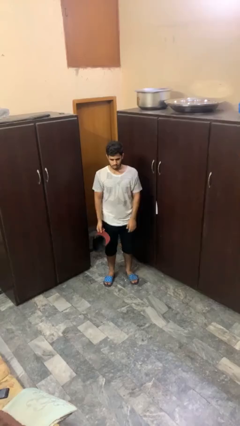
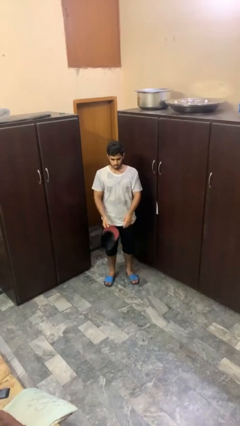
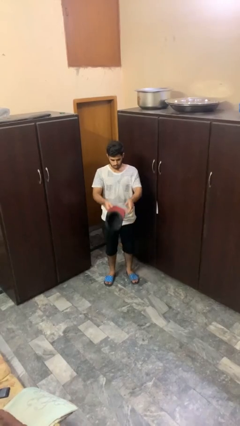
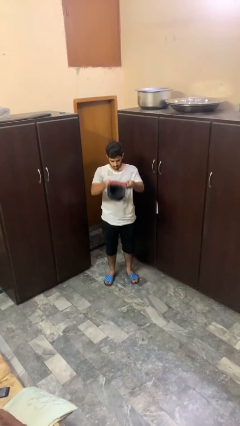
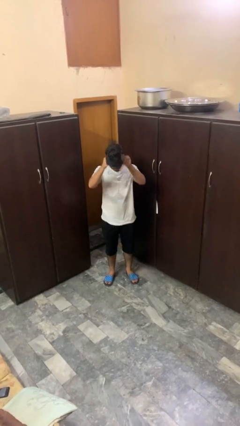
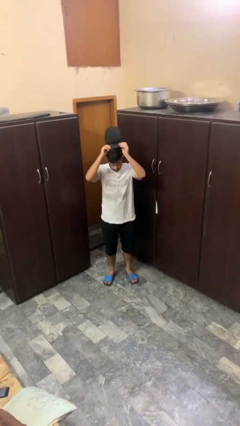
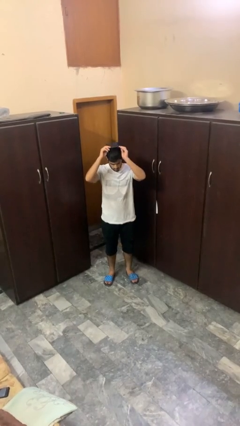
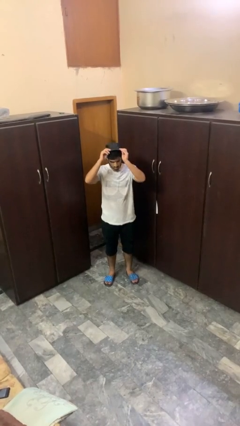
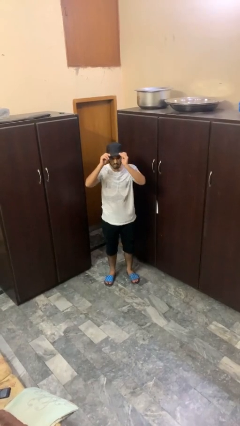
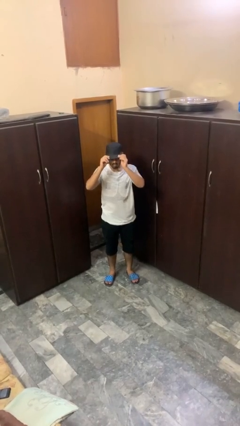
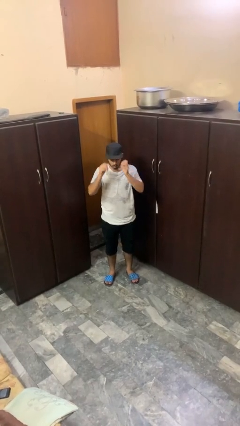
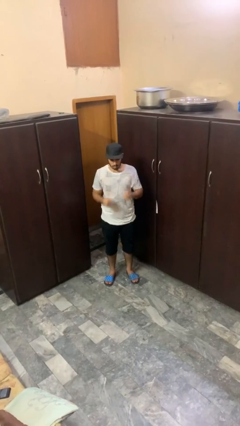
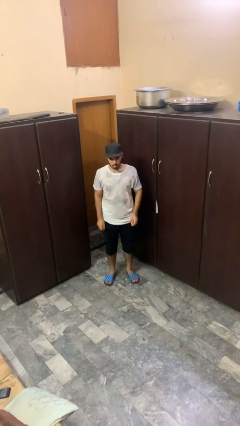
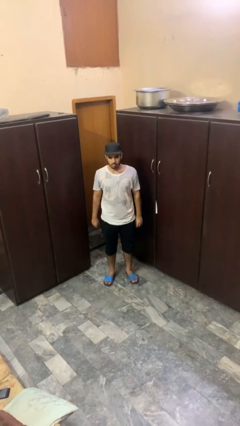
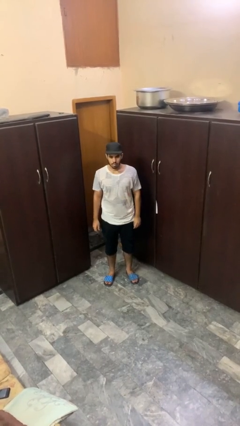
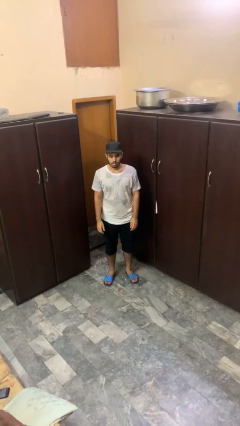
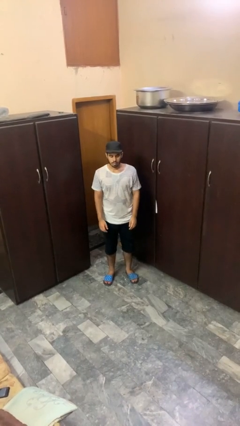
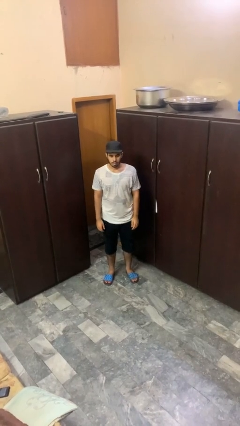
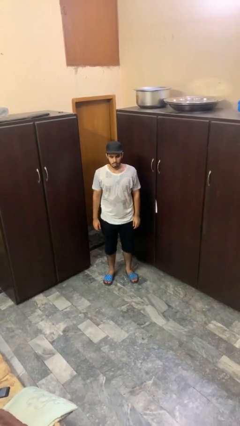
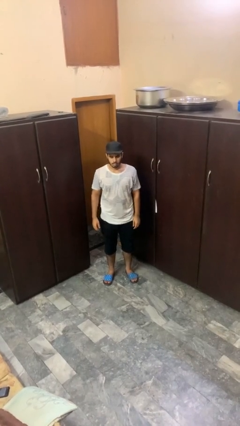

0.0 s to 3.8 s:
person puts on hat

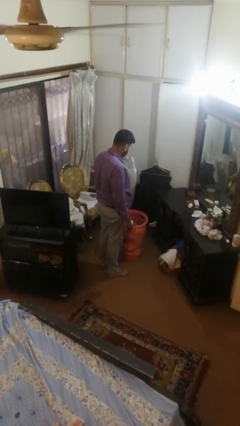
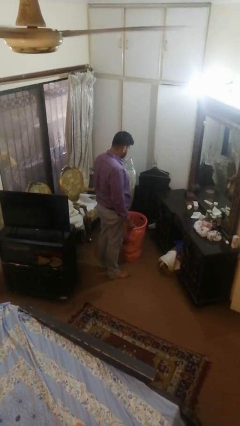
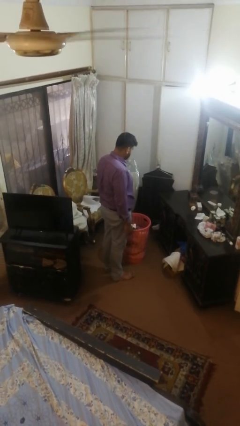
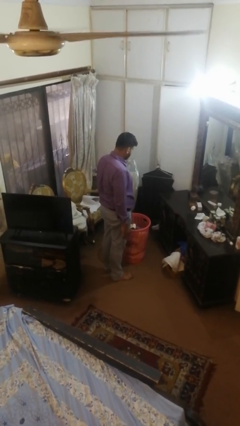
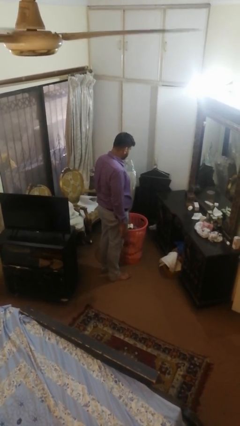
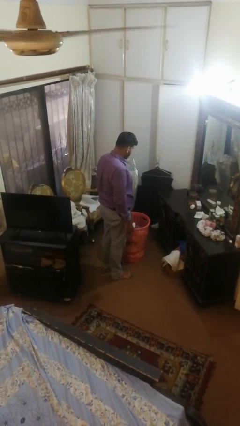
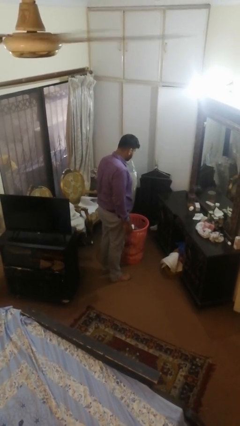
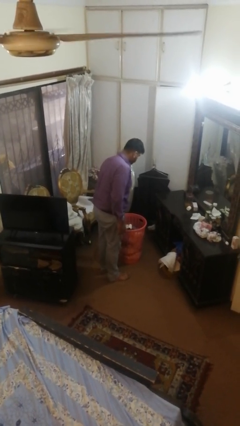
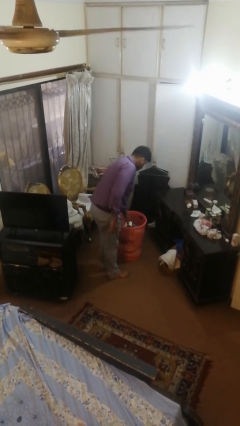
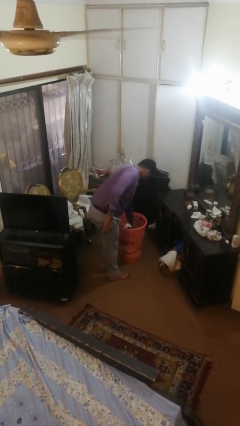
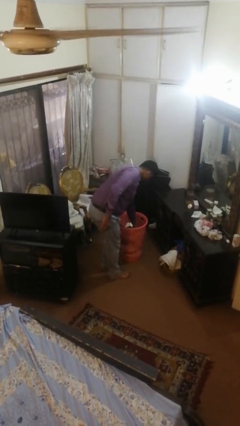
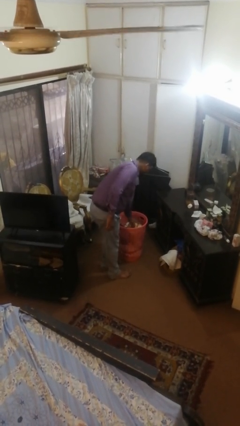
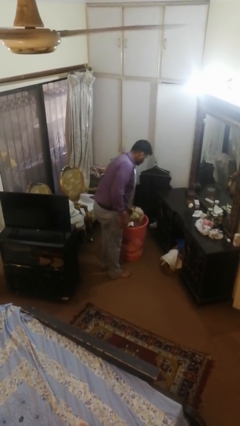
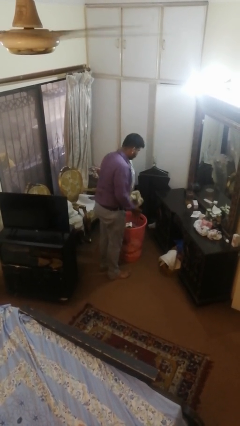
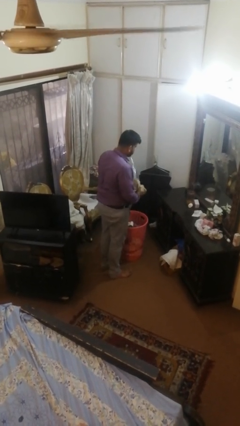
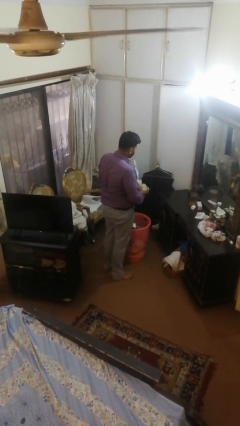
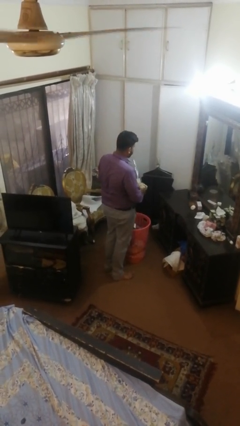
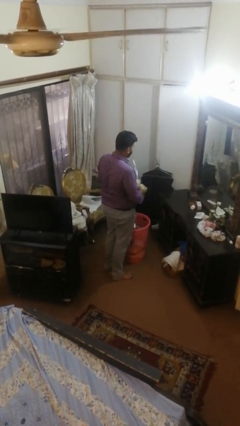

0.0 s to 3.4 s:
person takes object from basket

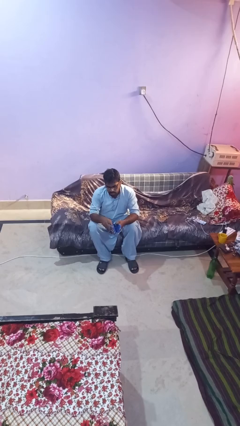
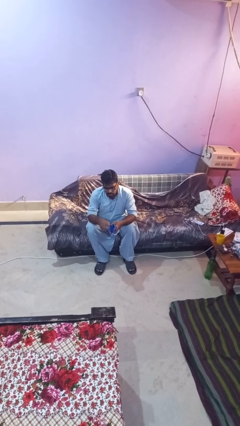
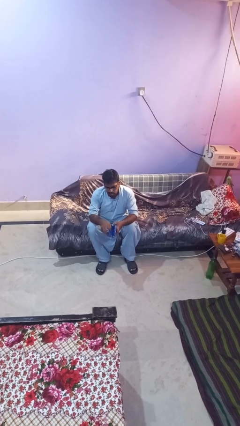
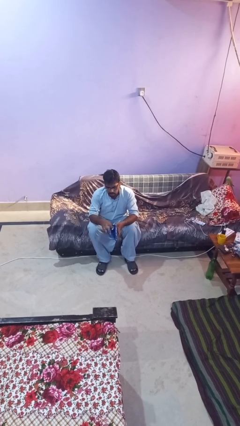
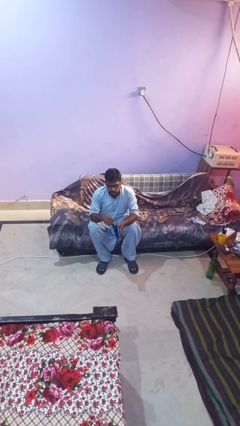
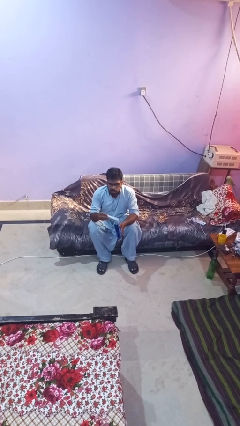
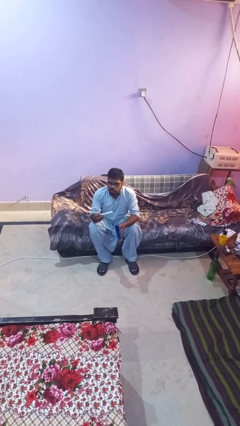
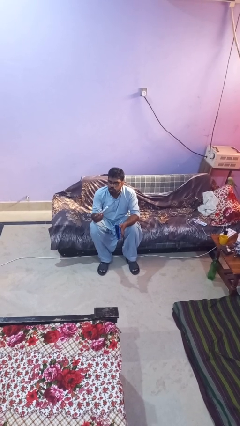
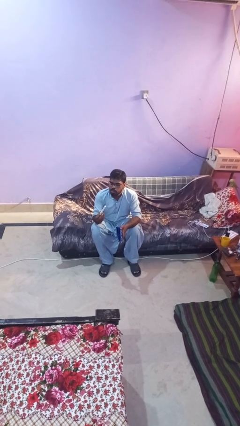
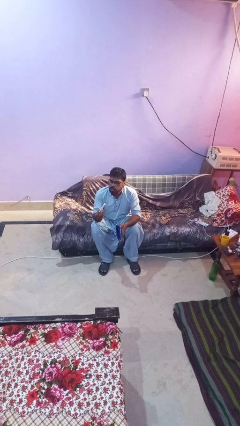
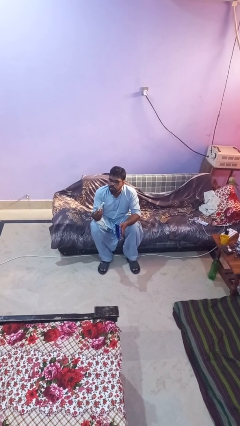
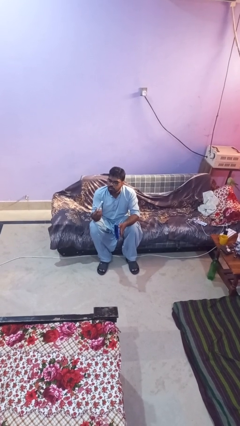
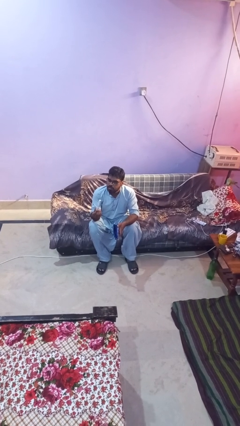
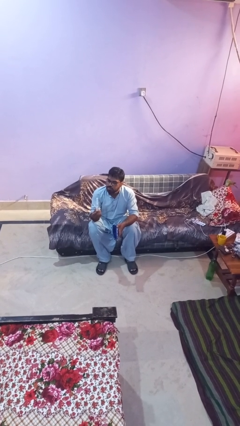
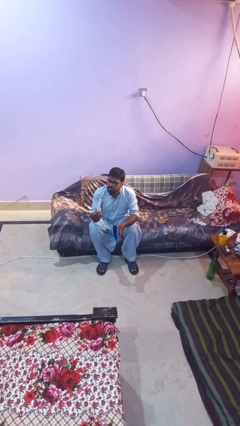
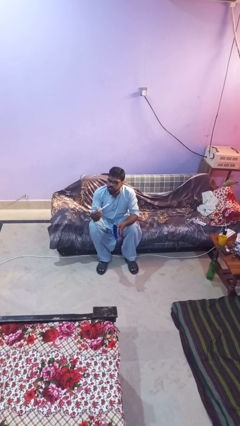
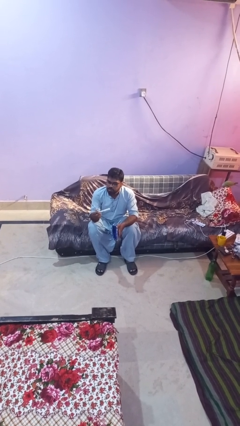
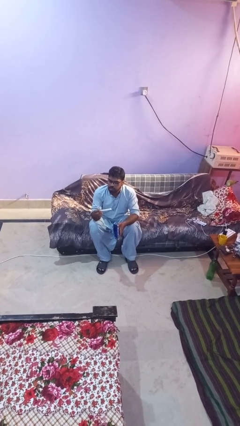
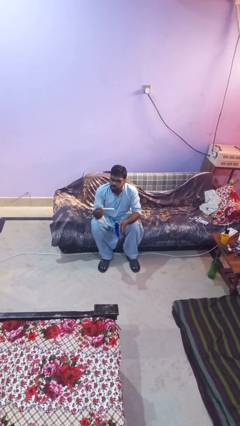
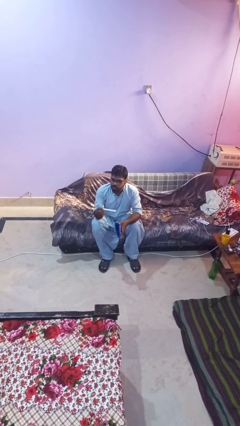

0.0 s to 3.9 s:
person takes object from purse

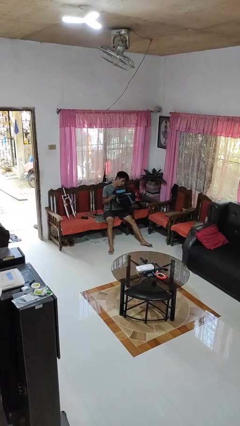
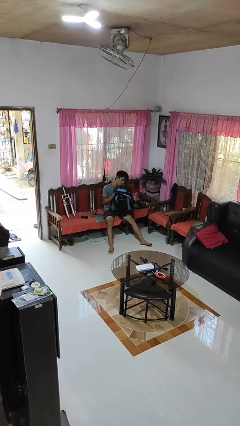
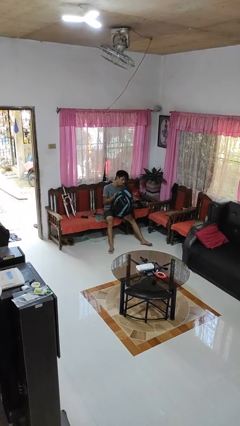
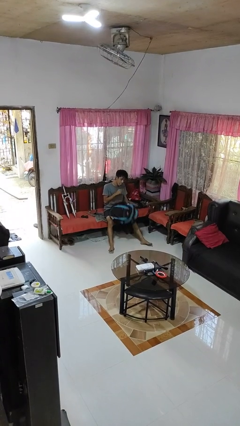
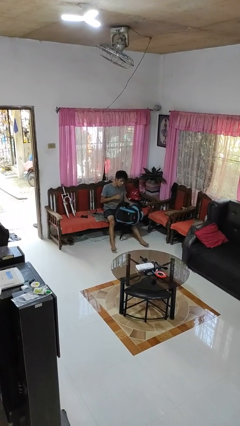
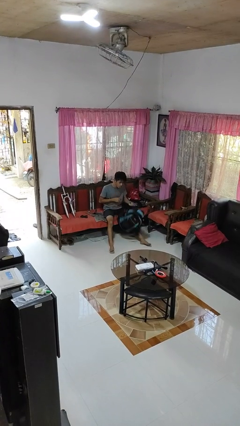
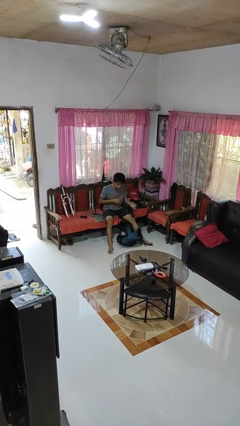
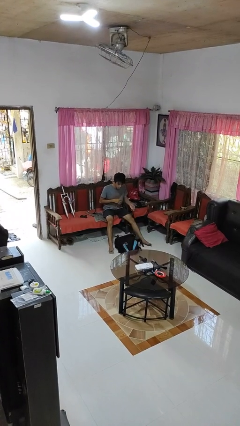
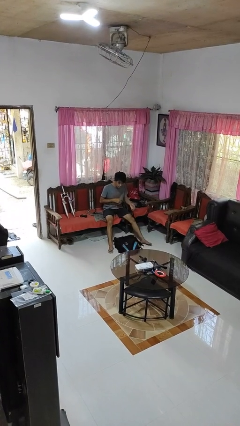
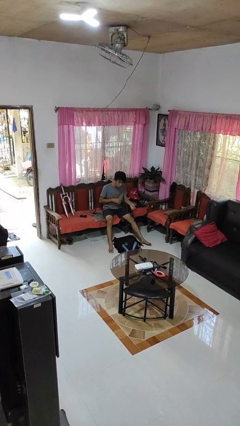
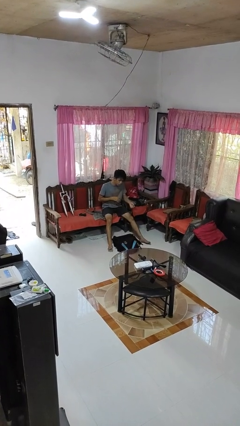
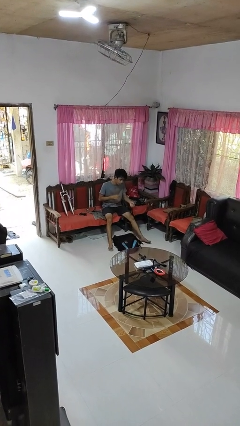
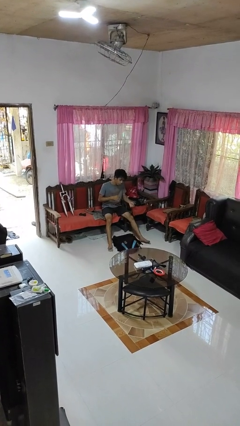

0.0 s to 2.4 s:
person drops object

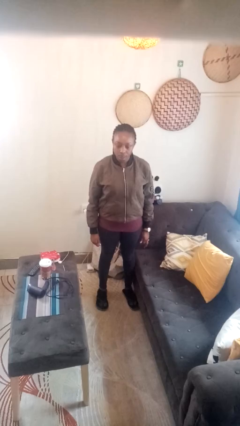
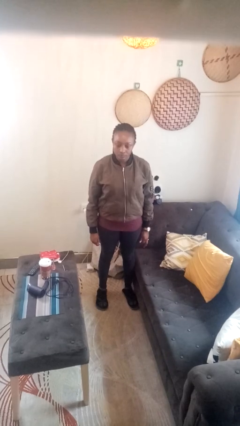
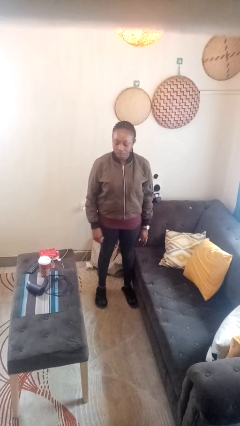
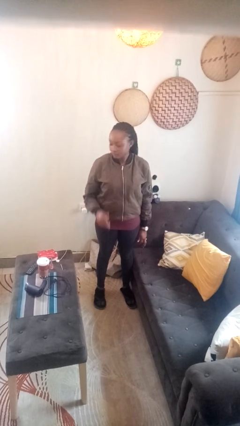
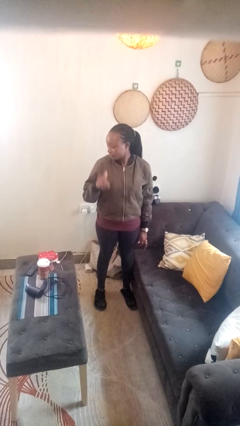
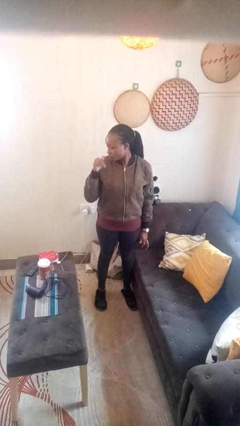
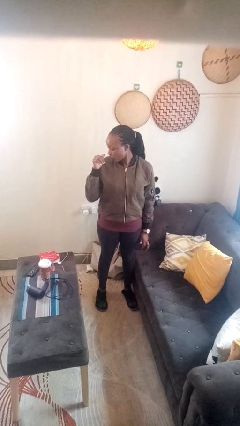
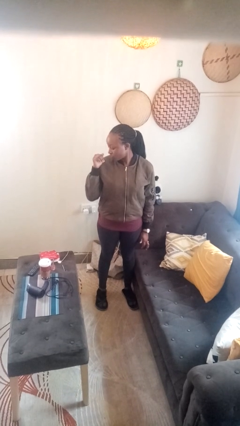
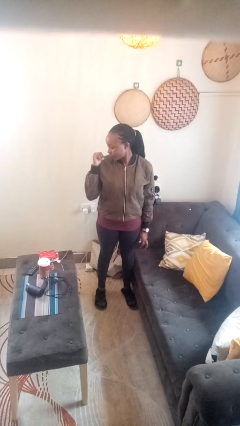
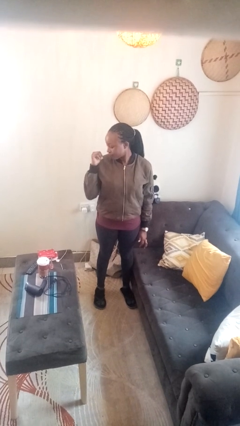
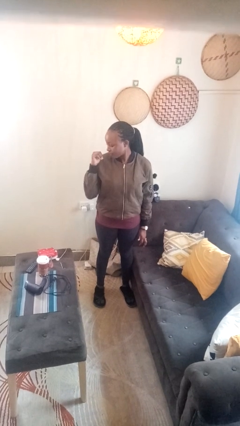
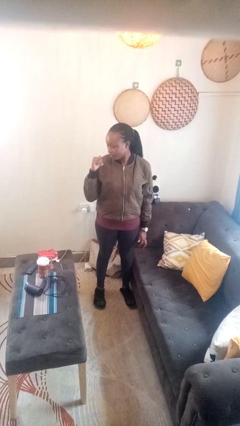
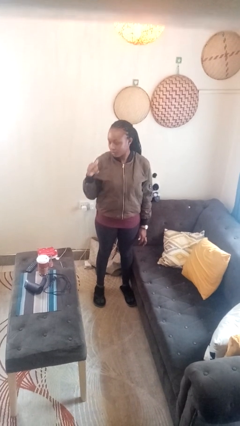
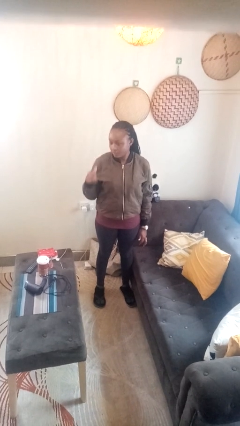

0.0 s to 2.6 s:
person gestures behind me

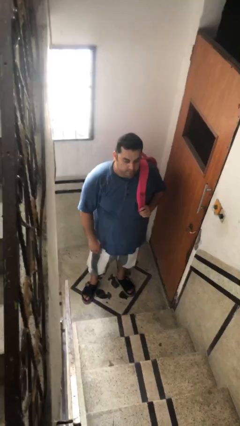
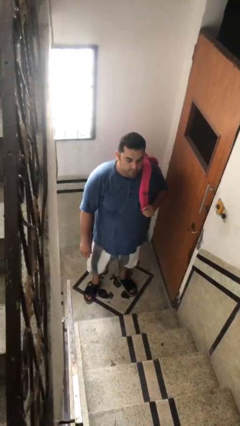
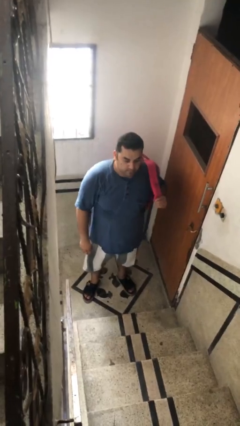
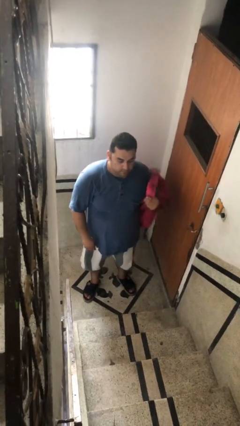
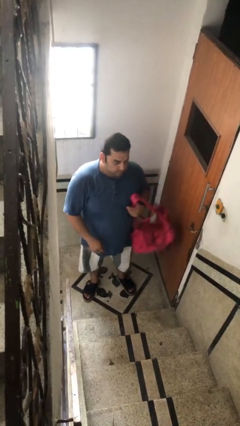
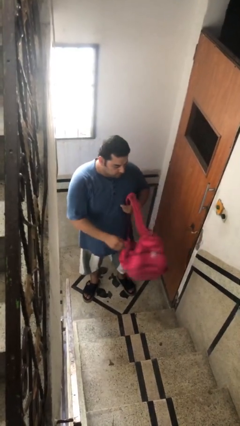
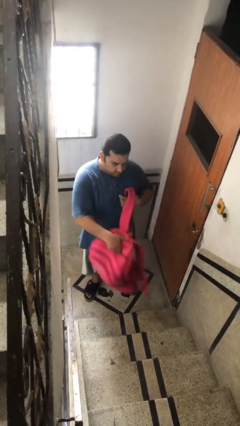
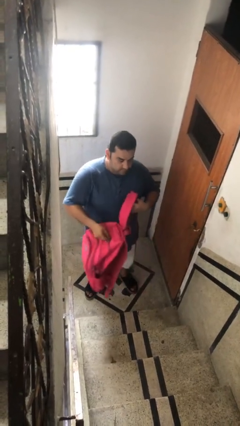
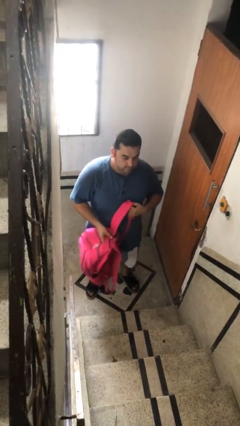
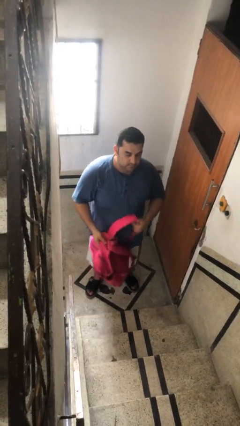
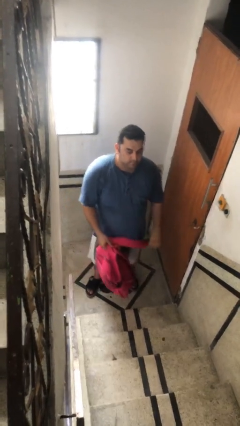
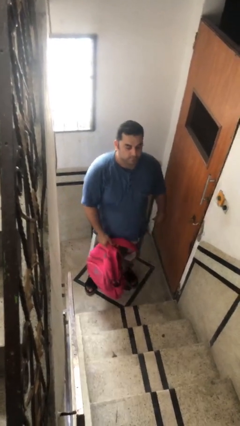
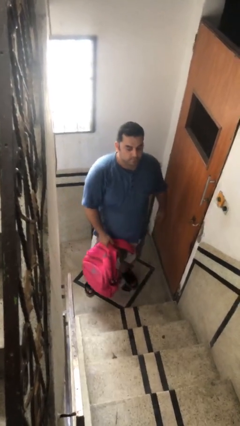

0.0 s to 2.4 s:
person takes off backpack
